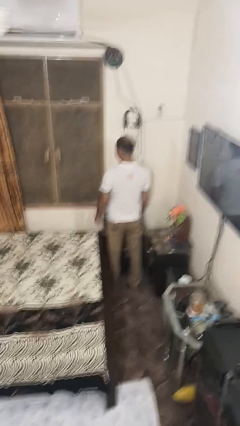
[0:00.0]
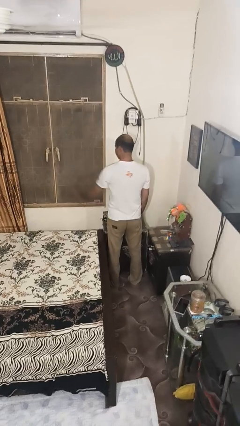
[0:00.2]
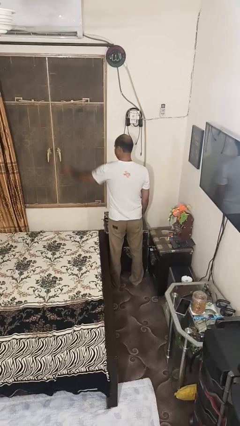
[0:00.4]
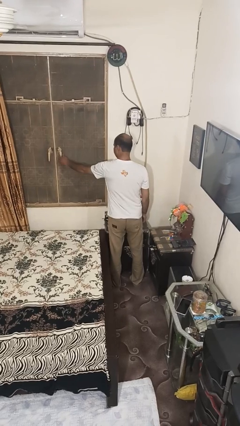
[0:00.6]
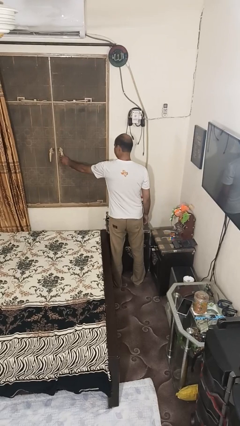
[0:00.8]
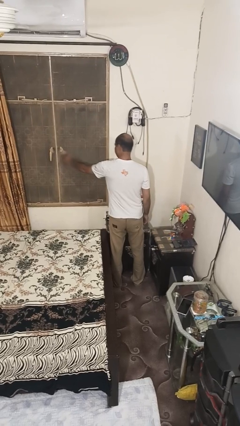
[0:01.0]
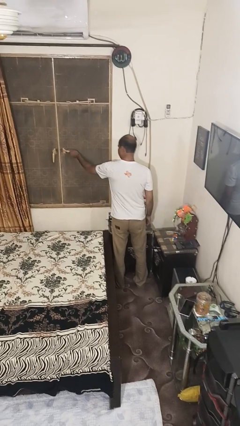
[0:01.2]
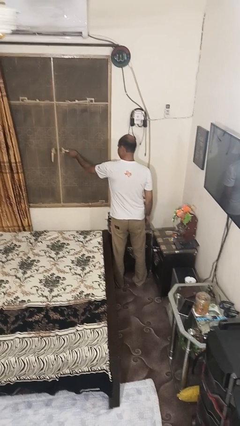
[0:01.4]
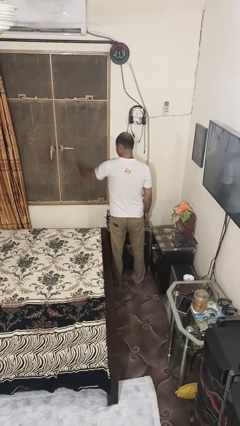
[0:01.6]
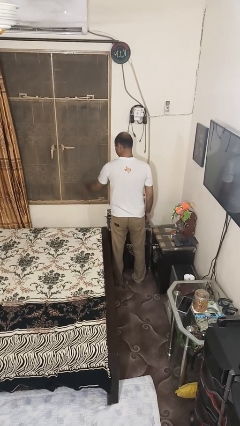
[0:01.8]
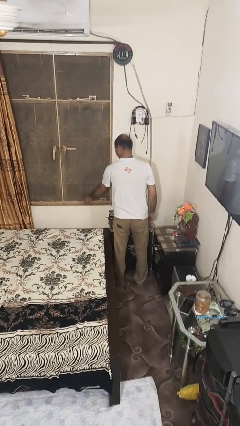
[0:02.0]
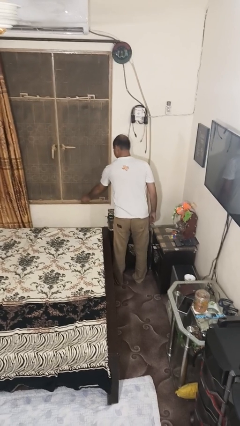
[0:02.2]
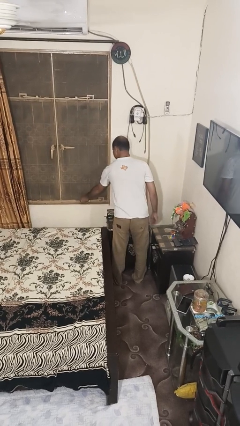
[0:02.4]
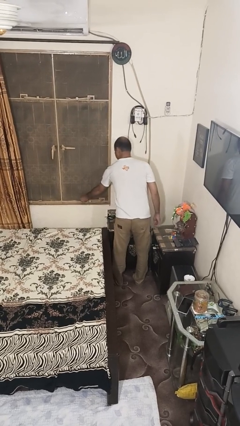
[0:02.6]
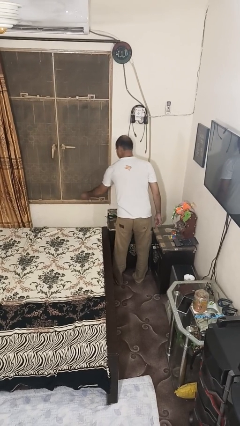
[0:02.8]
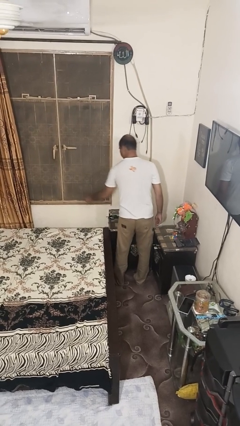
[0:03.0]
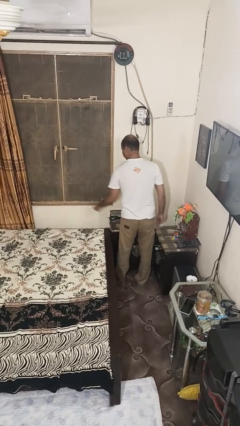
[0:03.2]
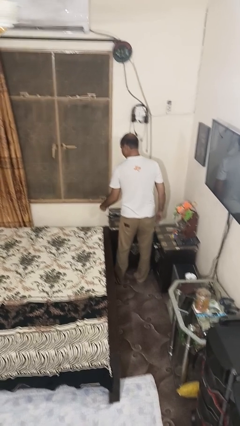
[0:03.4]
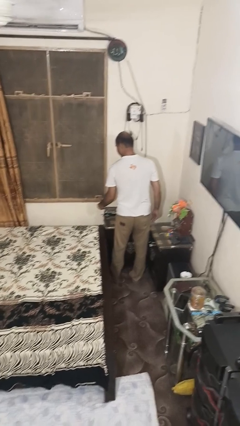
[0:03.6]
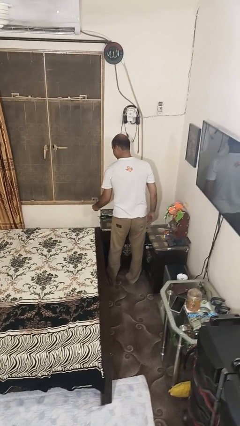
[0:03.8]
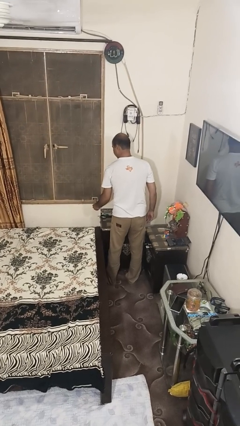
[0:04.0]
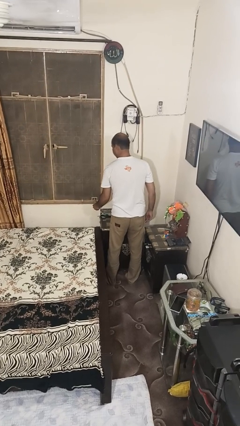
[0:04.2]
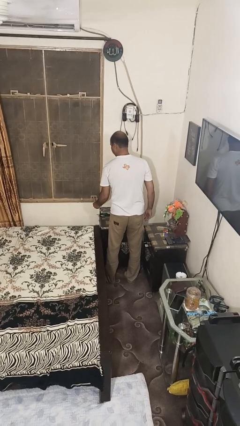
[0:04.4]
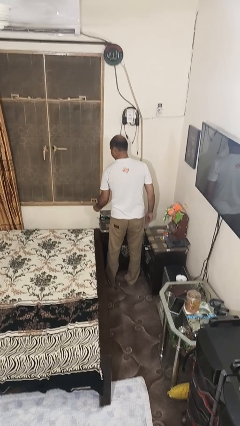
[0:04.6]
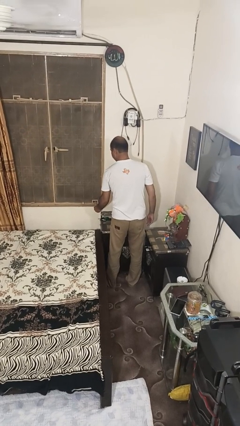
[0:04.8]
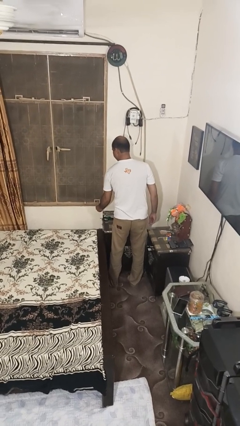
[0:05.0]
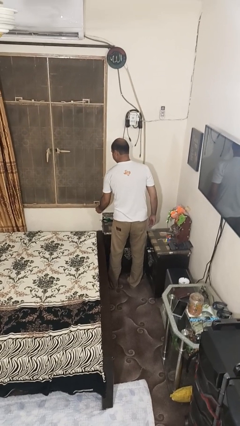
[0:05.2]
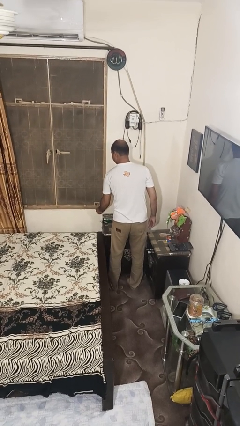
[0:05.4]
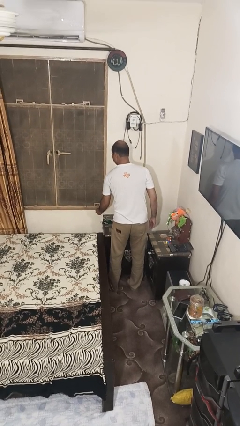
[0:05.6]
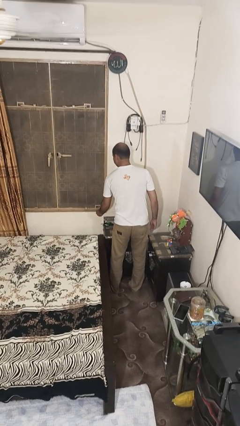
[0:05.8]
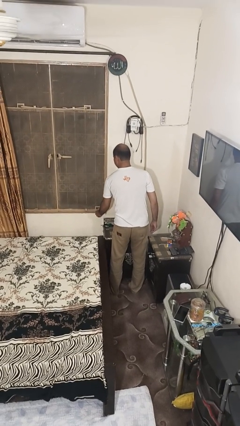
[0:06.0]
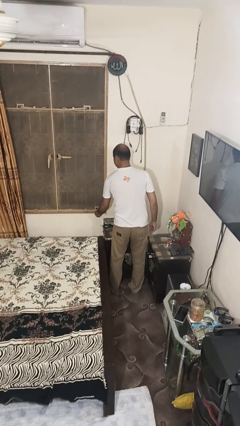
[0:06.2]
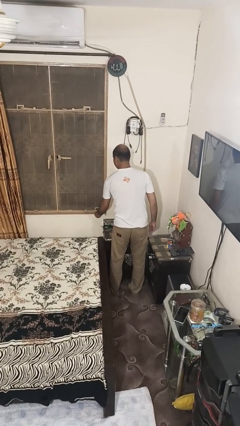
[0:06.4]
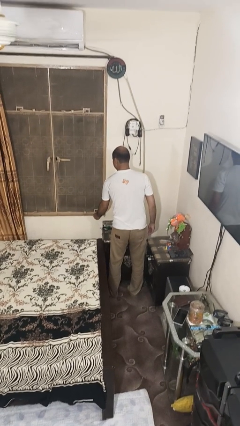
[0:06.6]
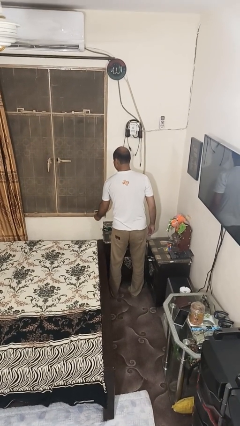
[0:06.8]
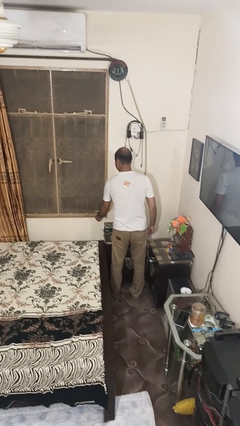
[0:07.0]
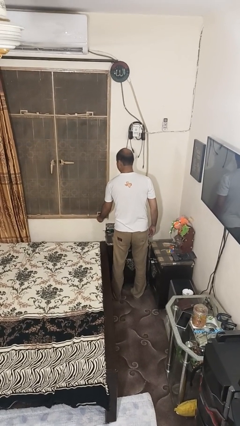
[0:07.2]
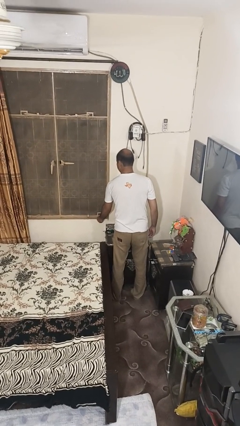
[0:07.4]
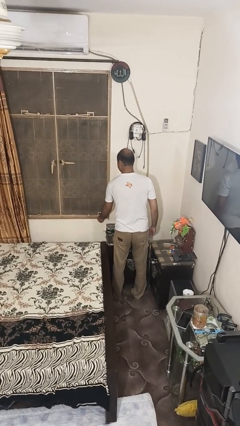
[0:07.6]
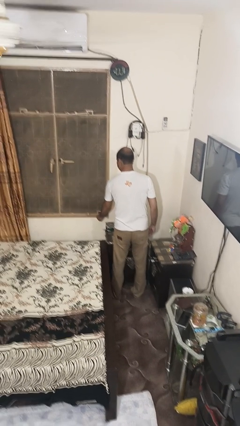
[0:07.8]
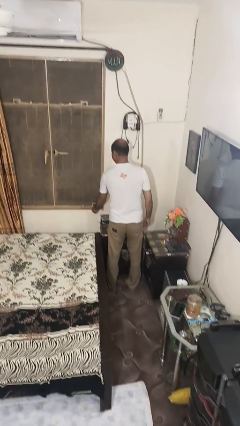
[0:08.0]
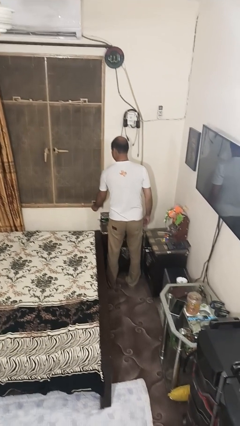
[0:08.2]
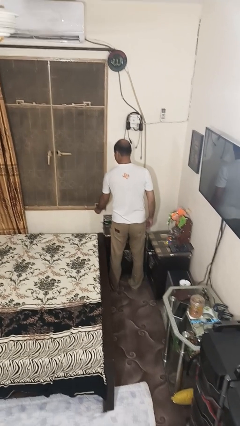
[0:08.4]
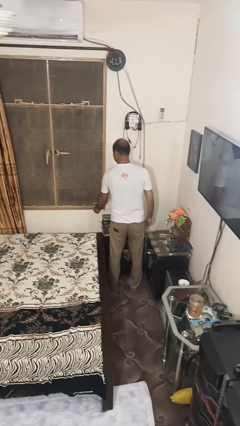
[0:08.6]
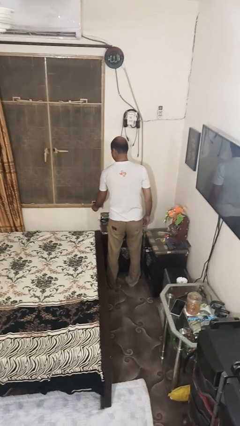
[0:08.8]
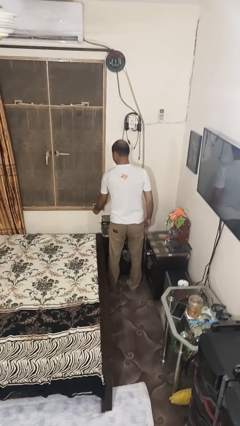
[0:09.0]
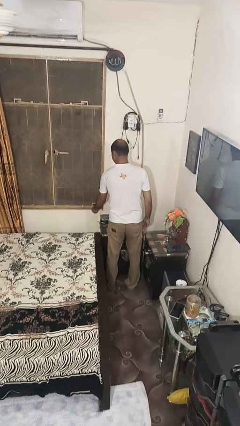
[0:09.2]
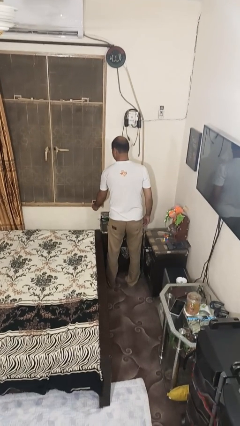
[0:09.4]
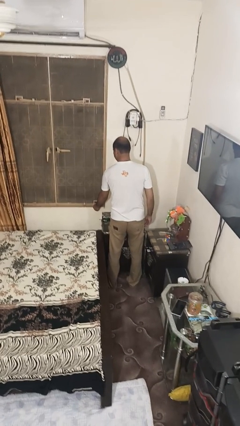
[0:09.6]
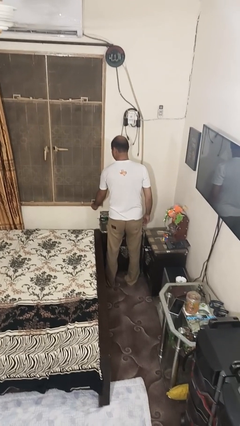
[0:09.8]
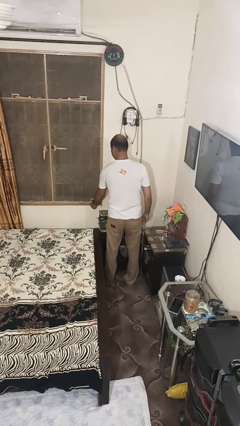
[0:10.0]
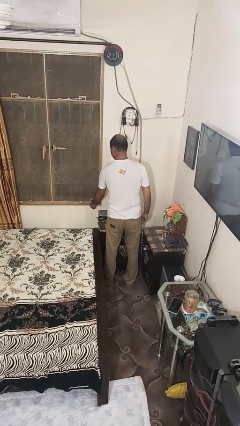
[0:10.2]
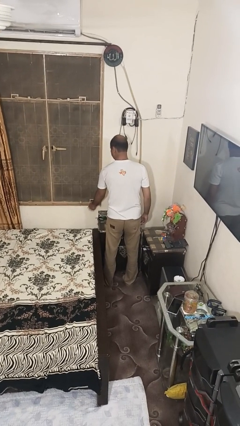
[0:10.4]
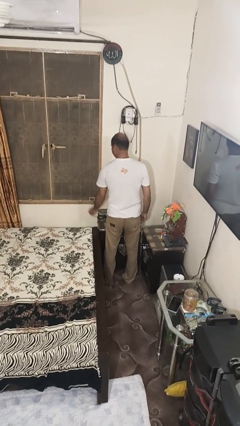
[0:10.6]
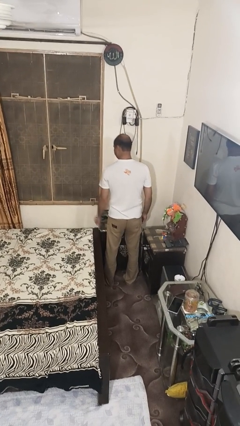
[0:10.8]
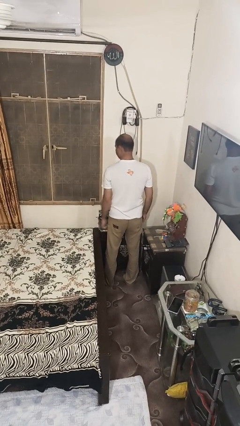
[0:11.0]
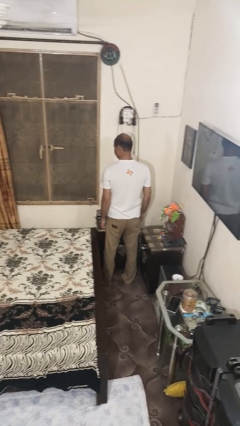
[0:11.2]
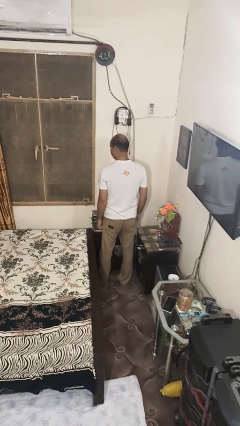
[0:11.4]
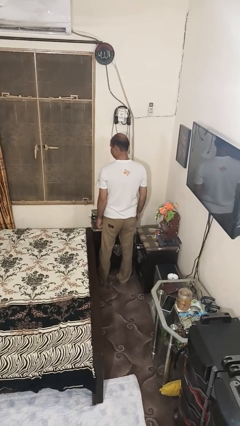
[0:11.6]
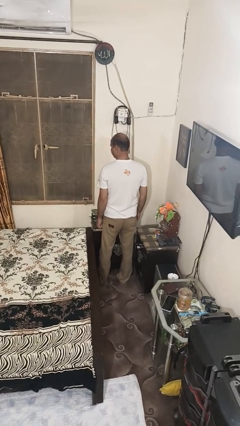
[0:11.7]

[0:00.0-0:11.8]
person opens home window

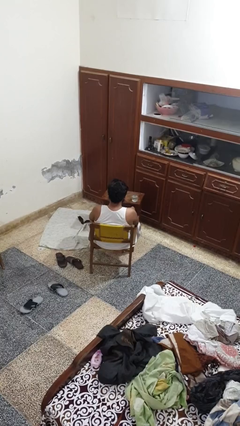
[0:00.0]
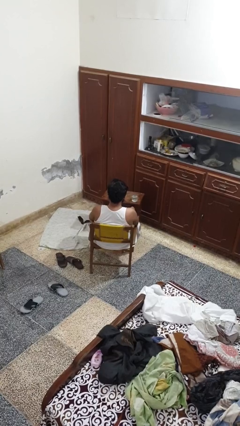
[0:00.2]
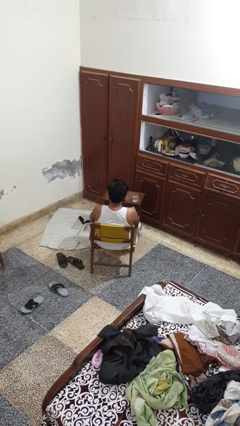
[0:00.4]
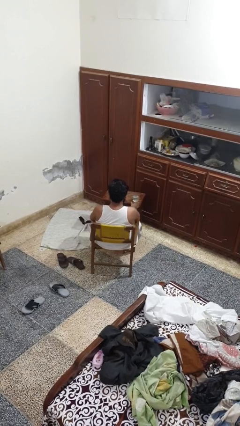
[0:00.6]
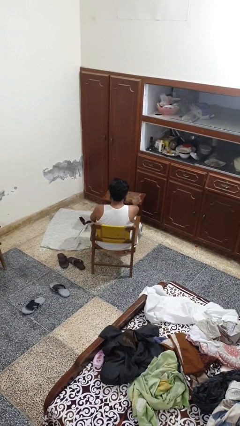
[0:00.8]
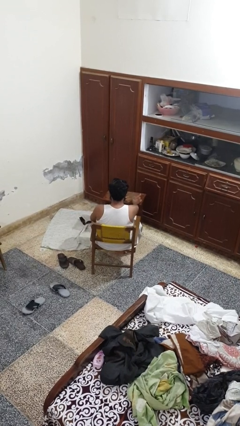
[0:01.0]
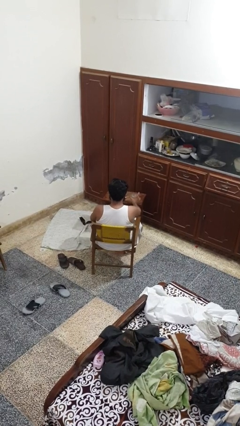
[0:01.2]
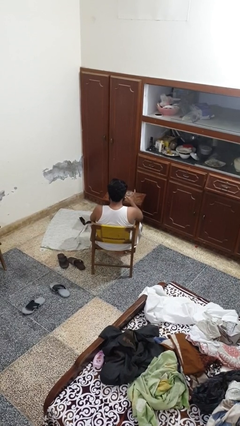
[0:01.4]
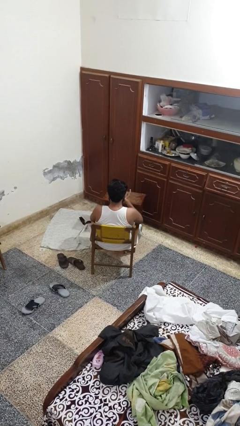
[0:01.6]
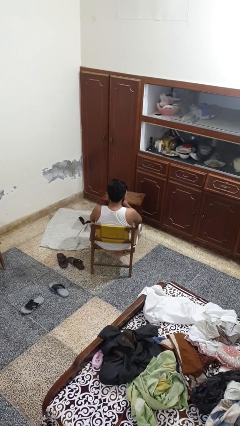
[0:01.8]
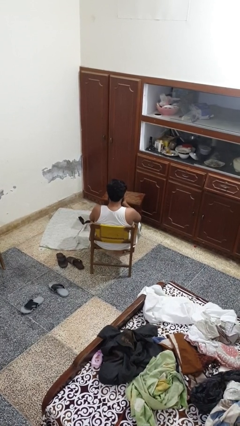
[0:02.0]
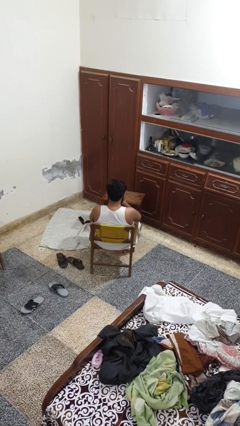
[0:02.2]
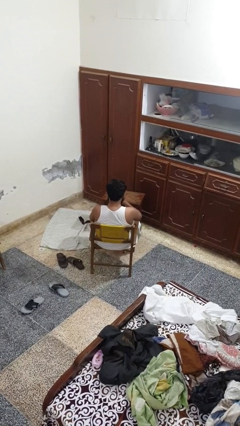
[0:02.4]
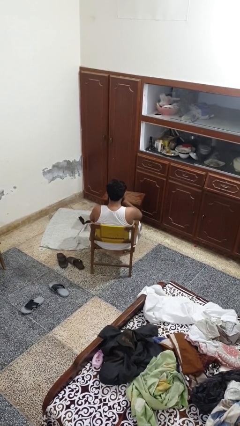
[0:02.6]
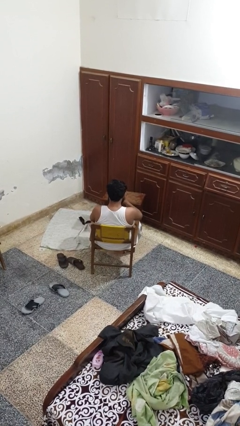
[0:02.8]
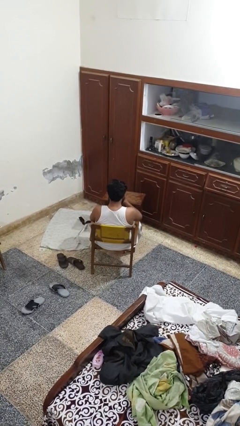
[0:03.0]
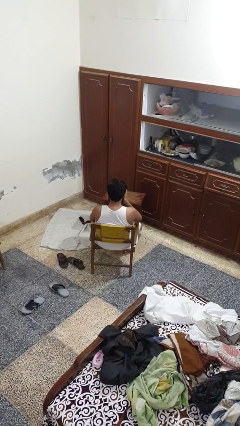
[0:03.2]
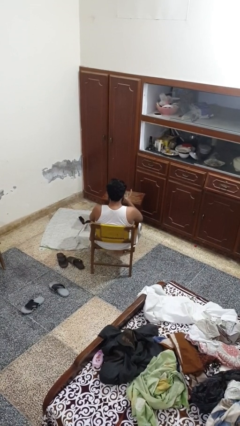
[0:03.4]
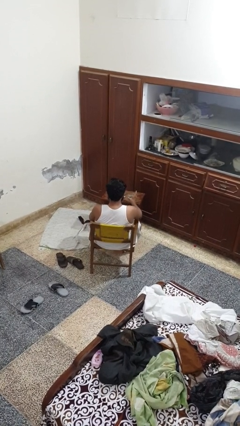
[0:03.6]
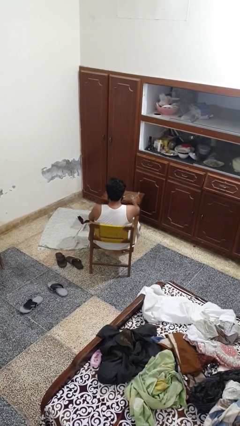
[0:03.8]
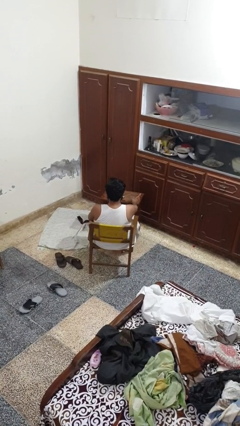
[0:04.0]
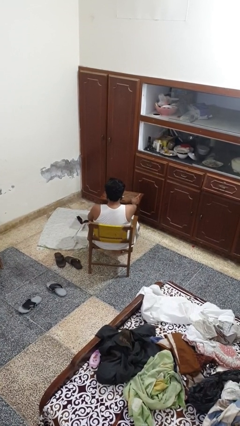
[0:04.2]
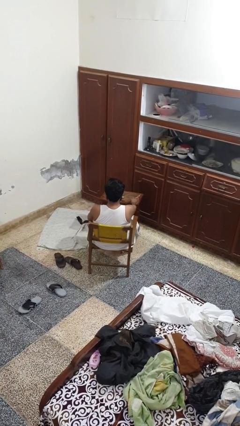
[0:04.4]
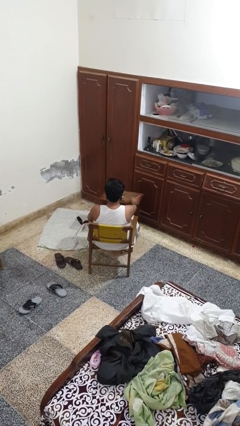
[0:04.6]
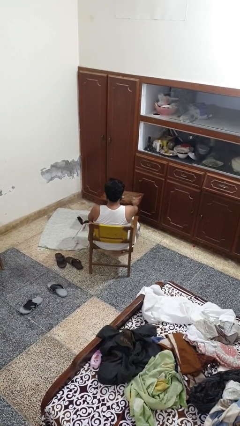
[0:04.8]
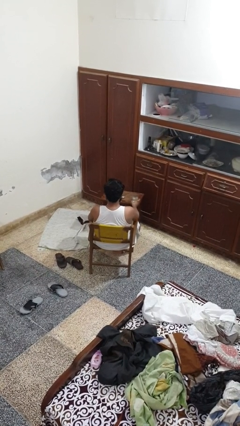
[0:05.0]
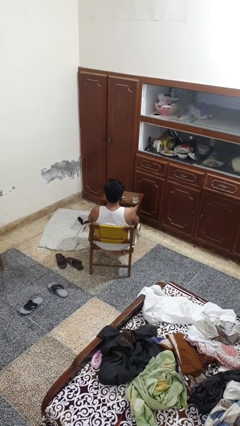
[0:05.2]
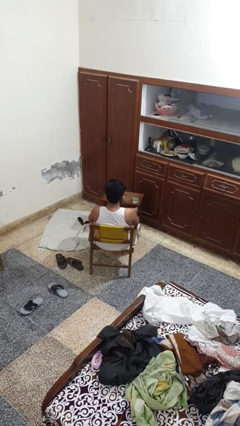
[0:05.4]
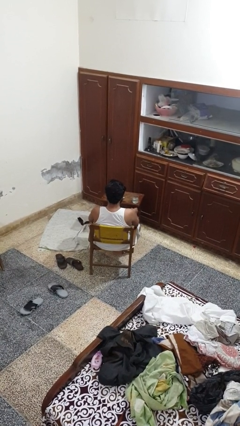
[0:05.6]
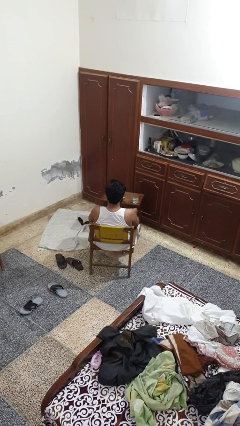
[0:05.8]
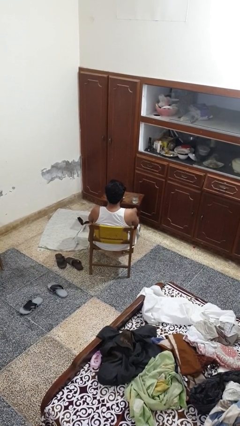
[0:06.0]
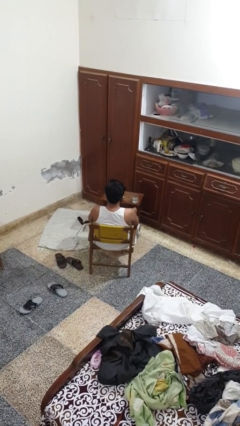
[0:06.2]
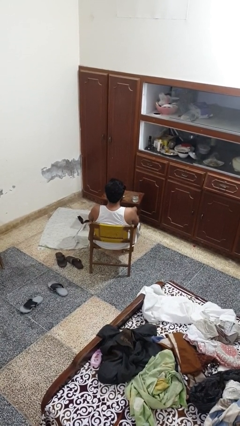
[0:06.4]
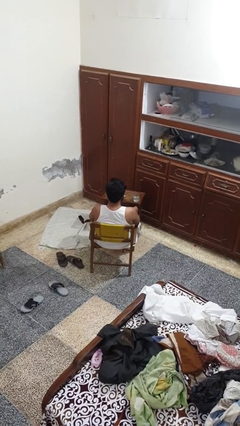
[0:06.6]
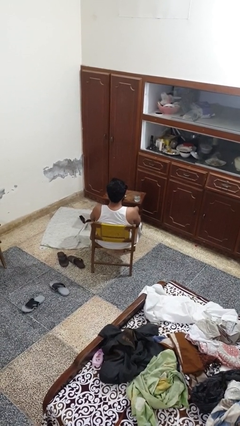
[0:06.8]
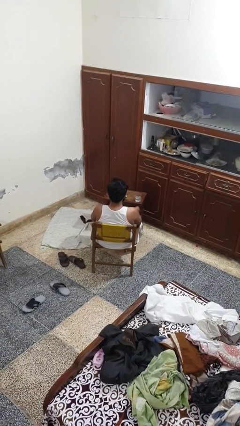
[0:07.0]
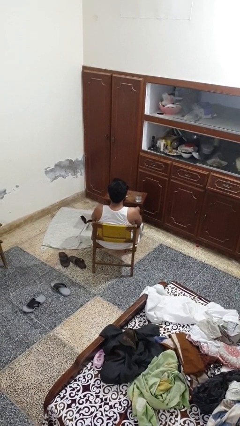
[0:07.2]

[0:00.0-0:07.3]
person drinks from cup
